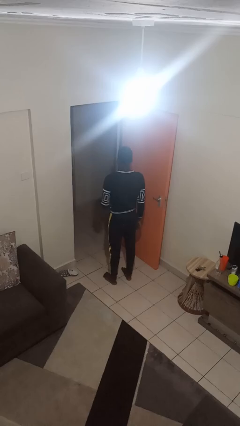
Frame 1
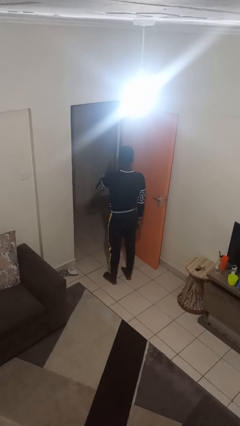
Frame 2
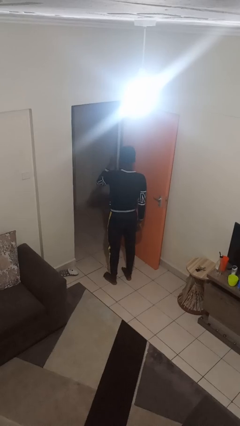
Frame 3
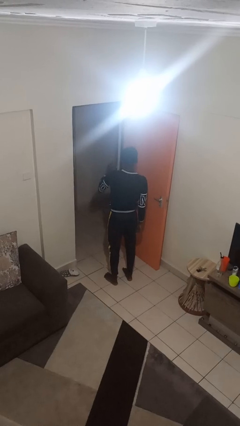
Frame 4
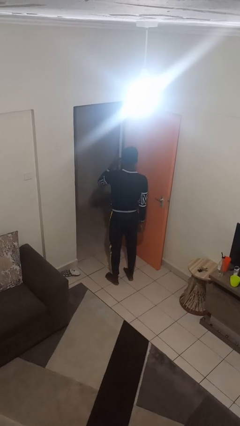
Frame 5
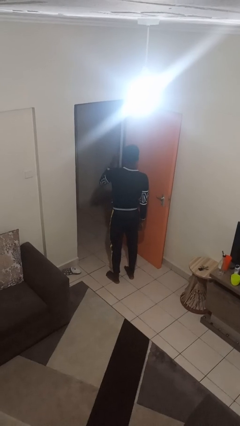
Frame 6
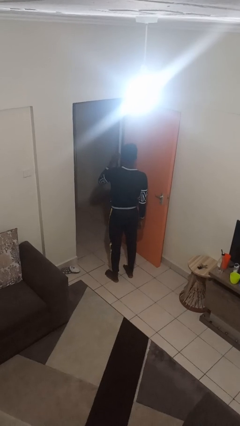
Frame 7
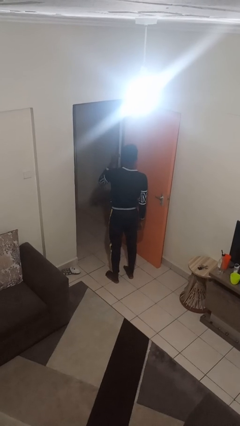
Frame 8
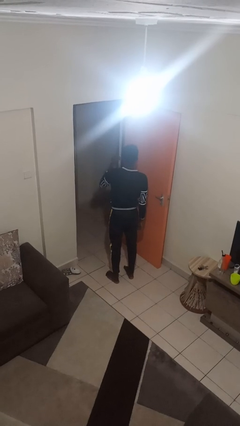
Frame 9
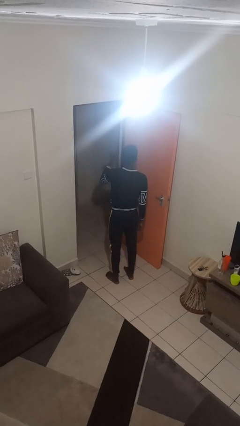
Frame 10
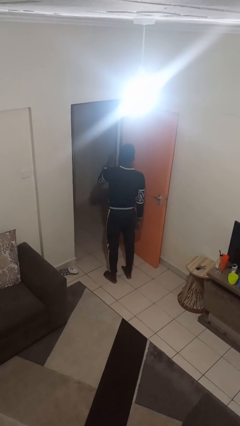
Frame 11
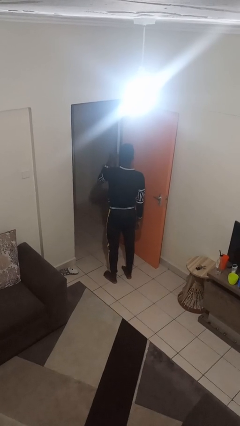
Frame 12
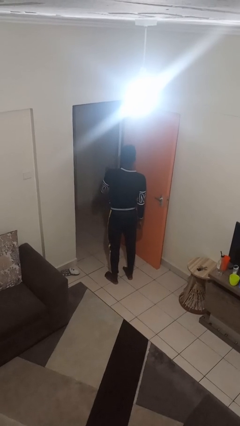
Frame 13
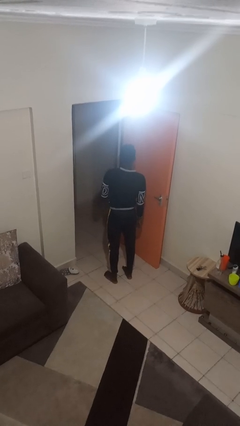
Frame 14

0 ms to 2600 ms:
person snaps fingers

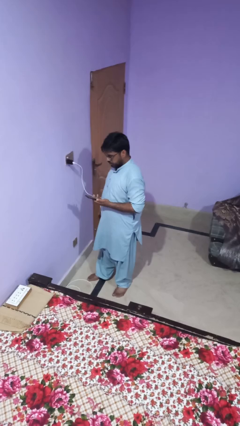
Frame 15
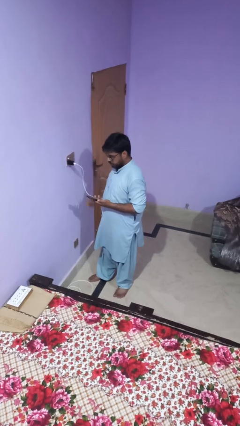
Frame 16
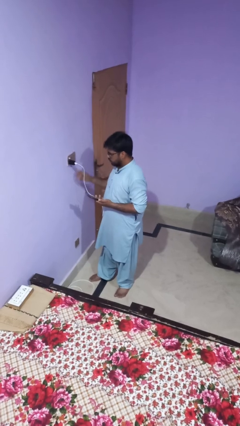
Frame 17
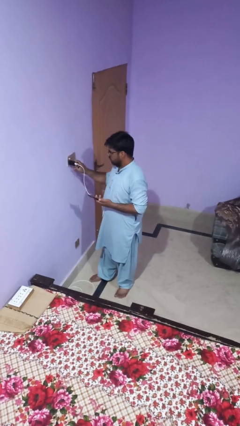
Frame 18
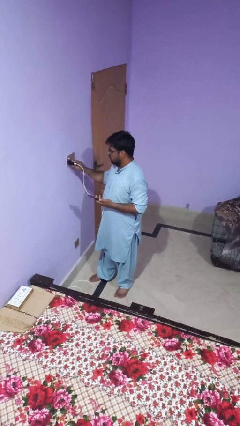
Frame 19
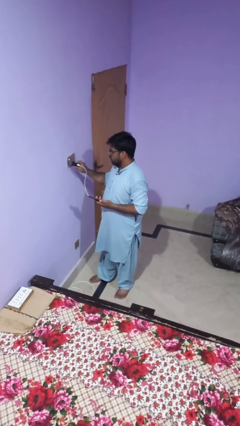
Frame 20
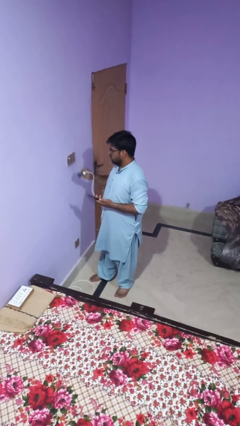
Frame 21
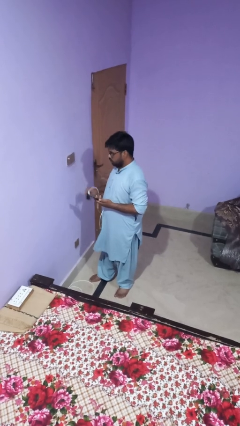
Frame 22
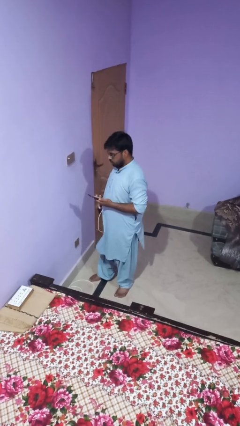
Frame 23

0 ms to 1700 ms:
person unplugs from electrical socket

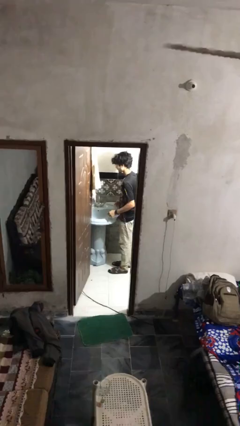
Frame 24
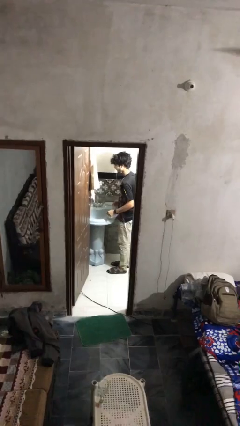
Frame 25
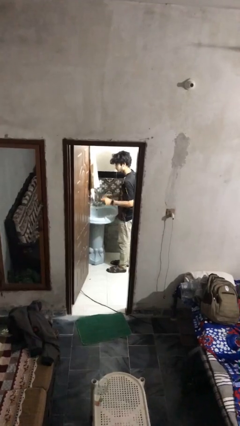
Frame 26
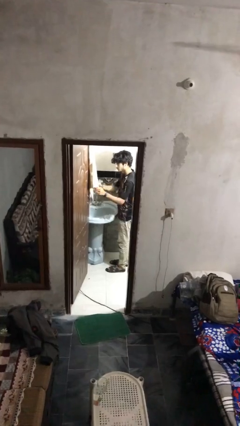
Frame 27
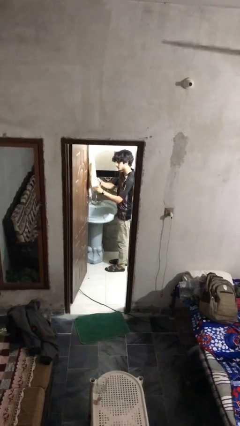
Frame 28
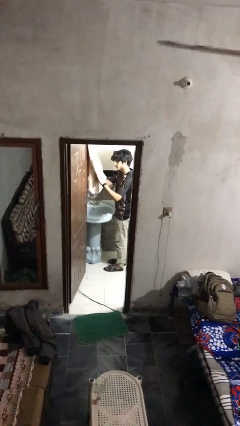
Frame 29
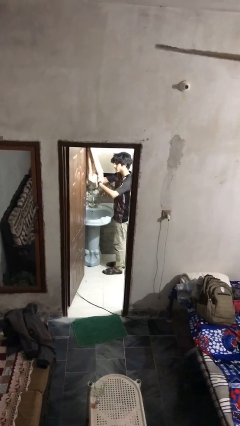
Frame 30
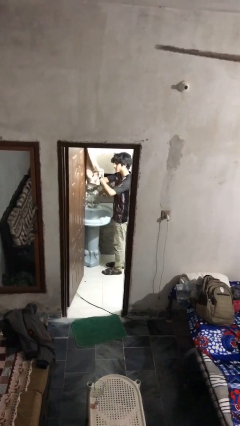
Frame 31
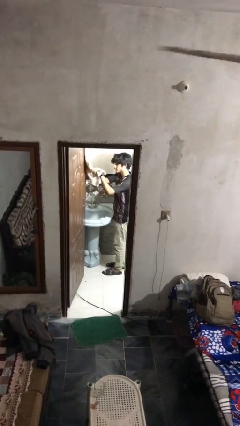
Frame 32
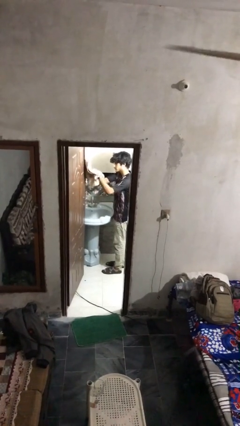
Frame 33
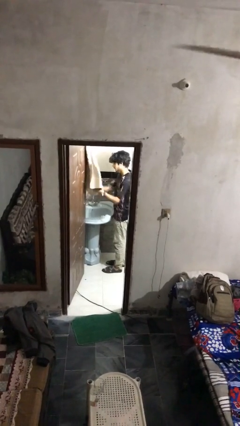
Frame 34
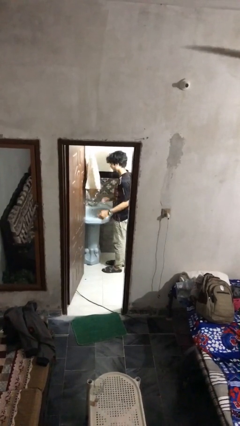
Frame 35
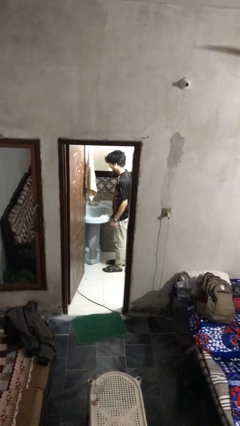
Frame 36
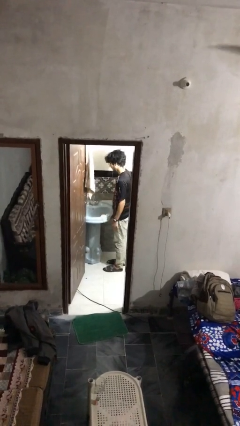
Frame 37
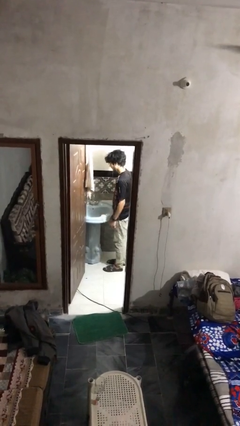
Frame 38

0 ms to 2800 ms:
person dries hands with towel

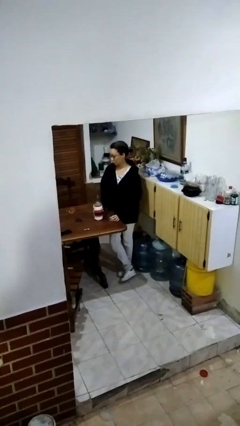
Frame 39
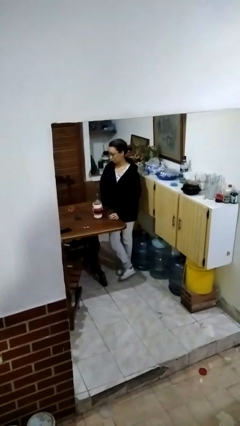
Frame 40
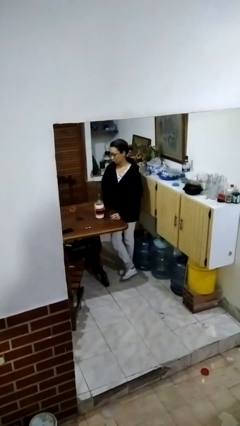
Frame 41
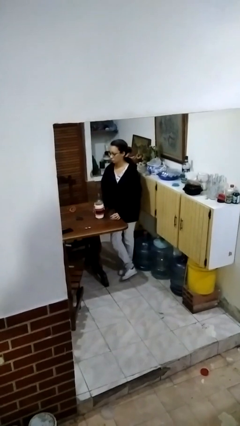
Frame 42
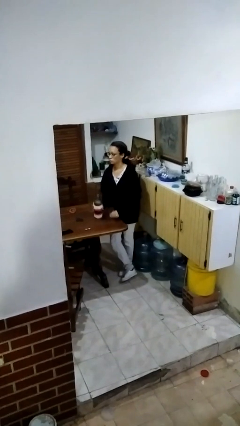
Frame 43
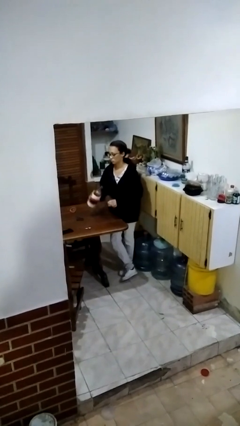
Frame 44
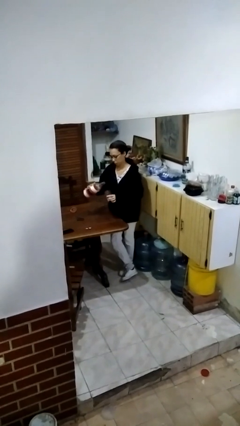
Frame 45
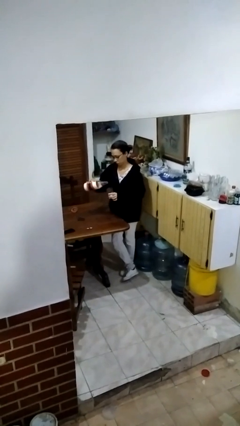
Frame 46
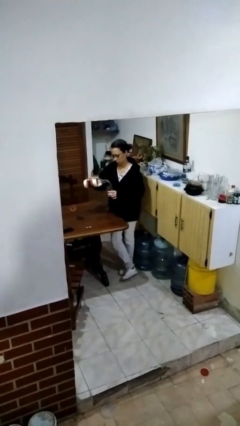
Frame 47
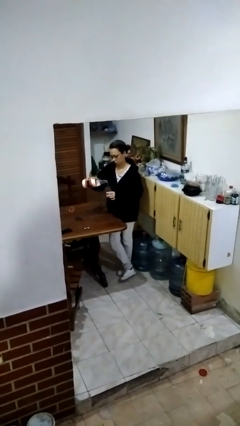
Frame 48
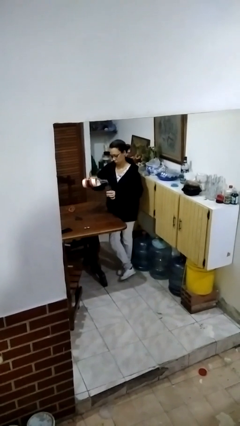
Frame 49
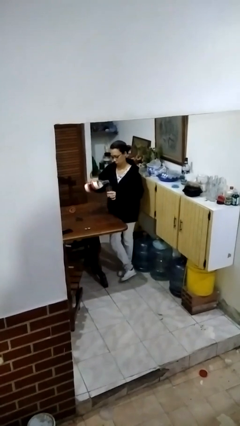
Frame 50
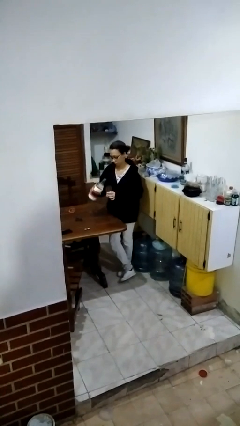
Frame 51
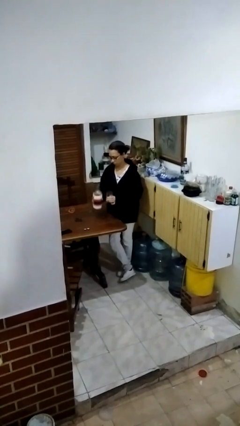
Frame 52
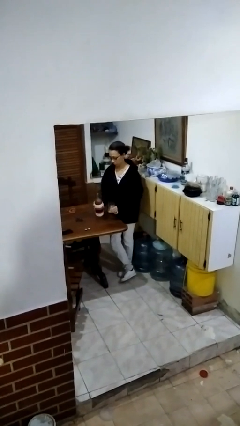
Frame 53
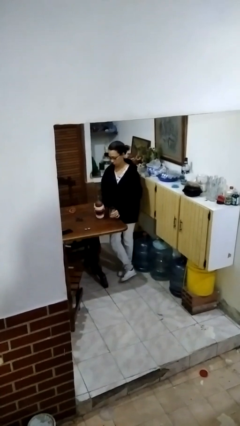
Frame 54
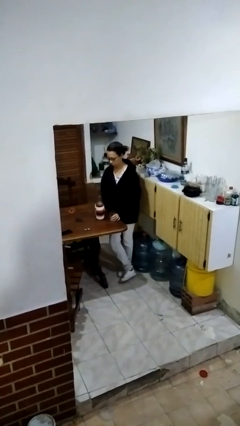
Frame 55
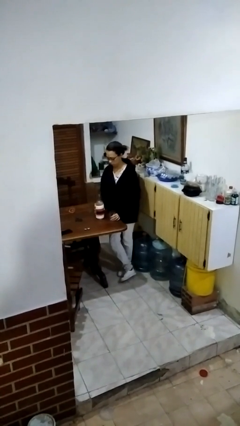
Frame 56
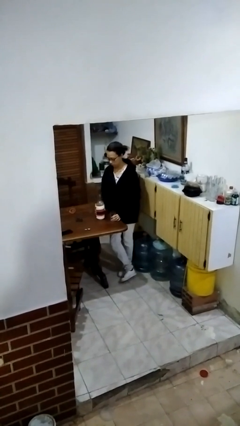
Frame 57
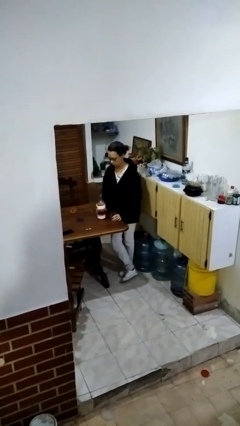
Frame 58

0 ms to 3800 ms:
person pours liquid into cup

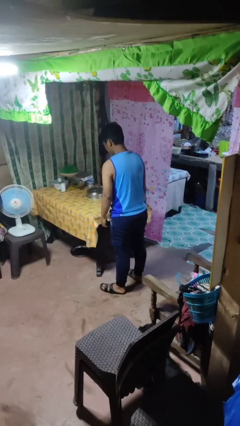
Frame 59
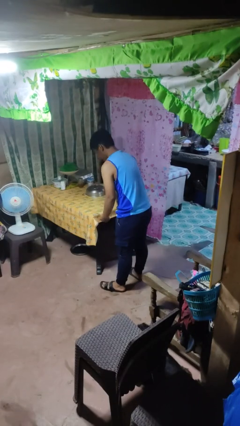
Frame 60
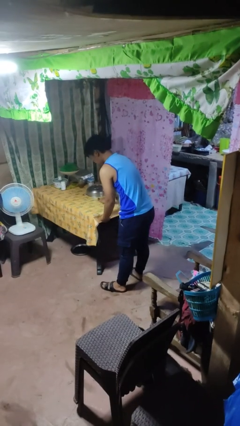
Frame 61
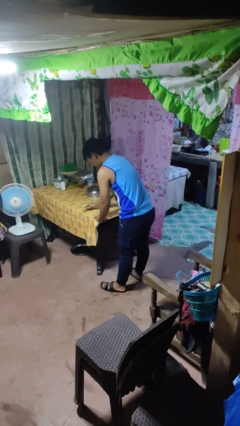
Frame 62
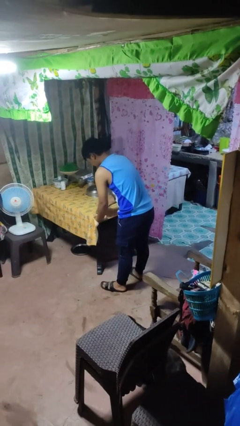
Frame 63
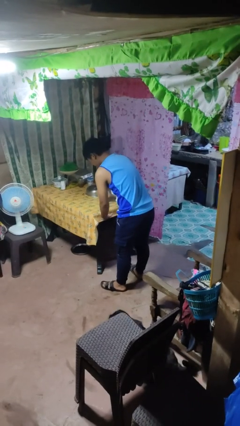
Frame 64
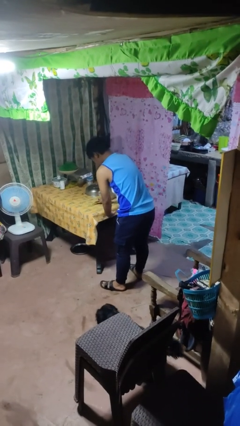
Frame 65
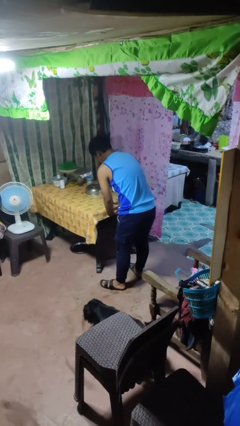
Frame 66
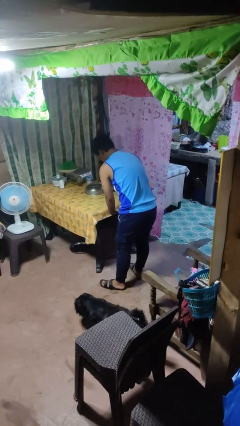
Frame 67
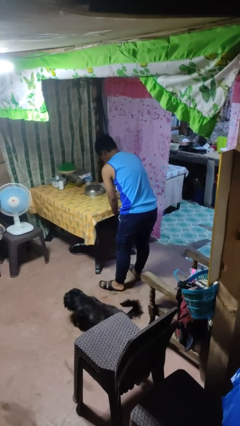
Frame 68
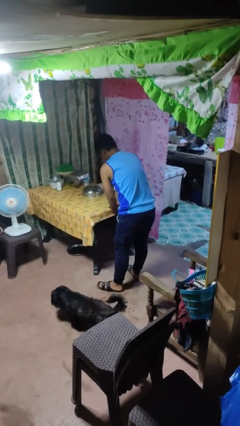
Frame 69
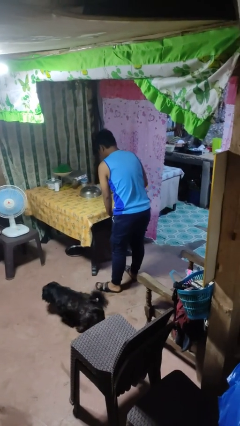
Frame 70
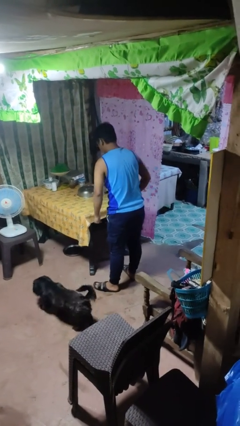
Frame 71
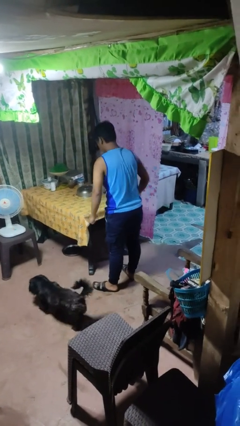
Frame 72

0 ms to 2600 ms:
person cleans table with rag

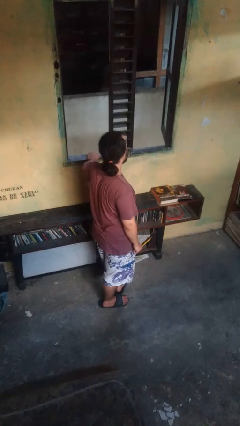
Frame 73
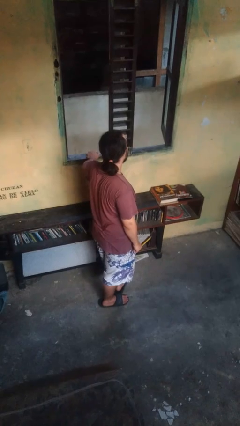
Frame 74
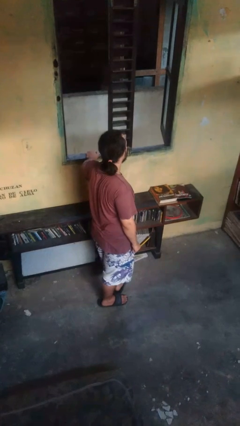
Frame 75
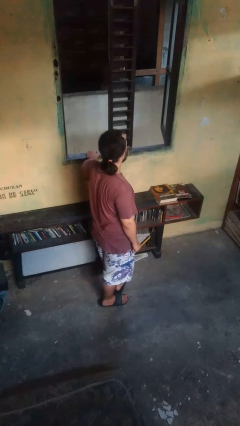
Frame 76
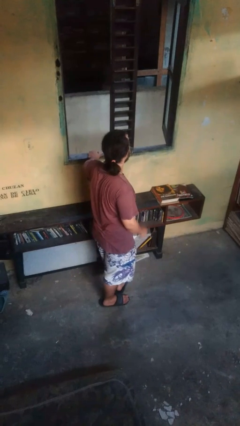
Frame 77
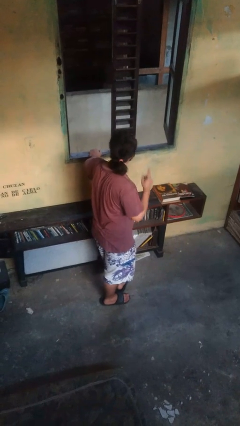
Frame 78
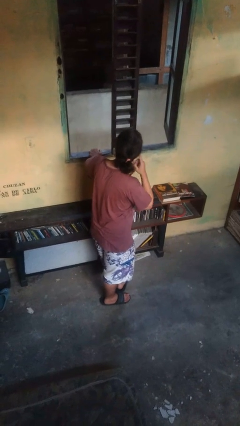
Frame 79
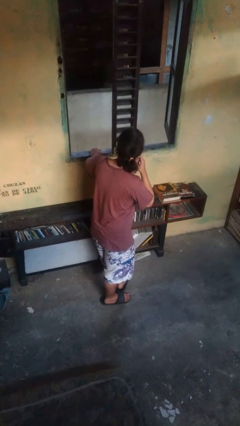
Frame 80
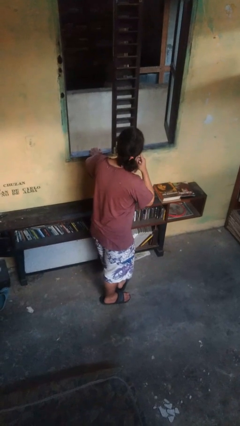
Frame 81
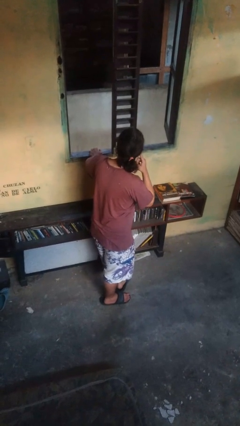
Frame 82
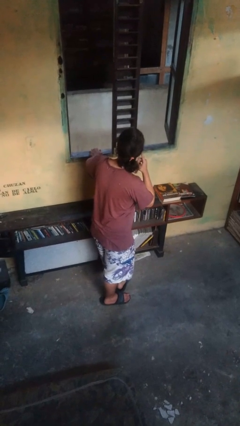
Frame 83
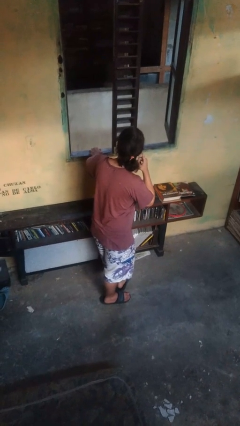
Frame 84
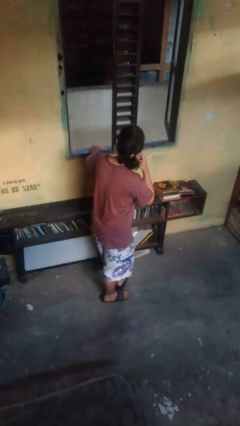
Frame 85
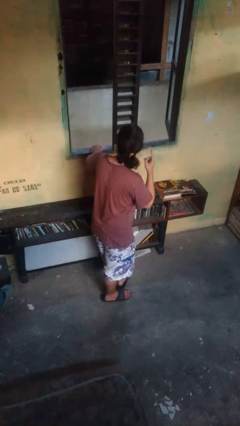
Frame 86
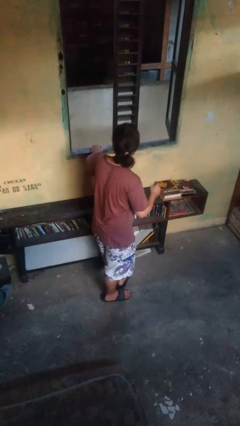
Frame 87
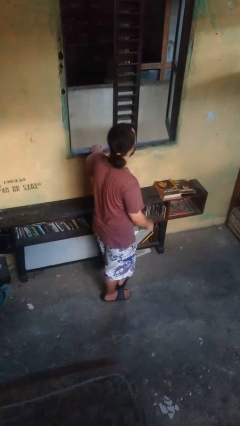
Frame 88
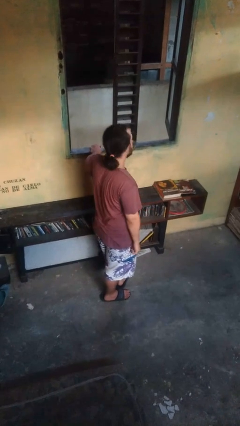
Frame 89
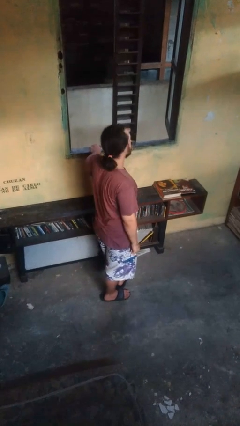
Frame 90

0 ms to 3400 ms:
person gestures listen closely
